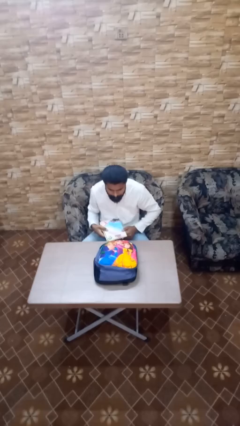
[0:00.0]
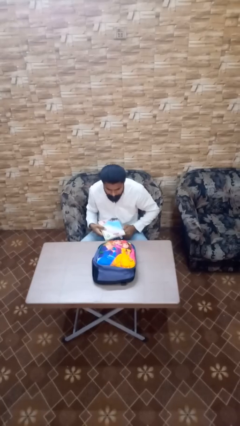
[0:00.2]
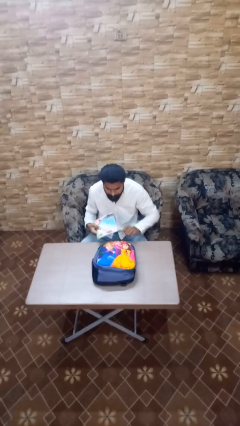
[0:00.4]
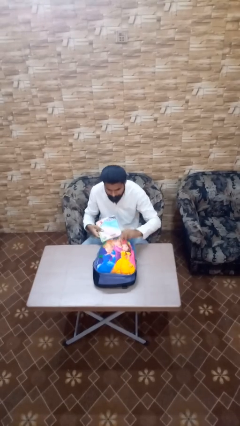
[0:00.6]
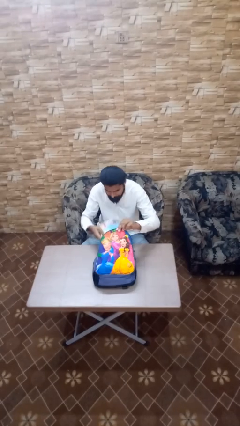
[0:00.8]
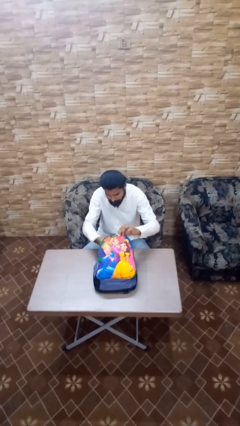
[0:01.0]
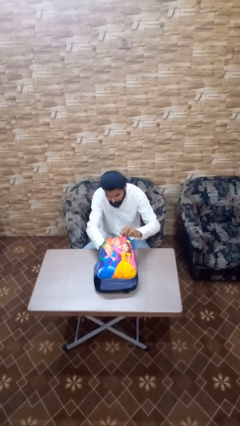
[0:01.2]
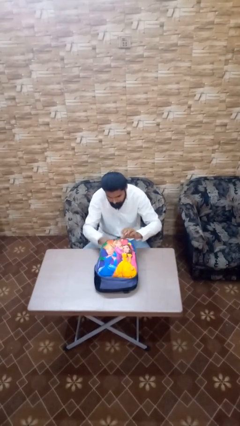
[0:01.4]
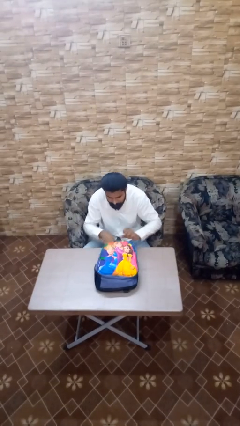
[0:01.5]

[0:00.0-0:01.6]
person puts object into backpack

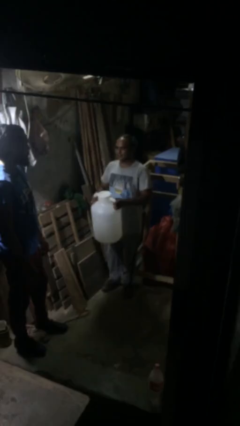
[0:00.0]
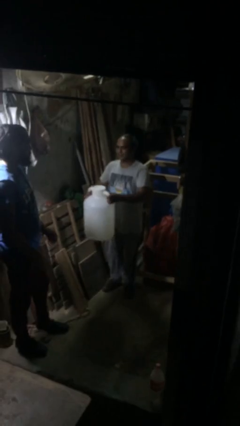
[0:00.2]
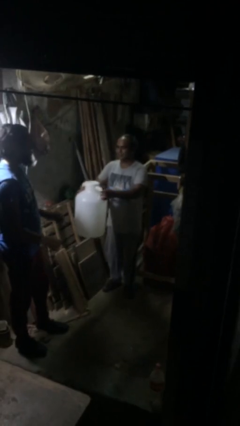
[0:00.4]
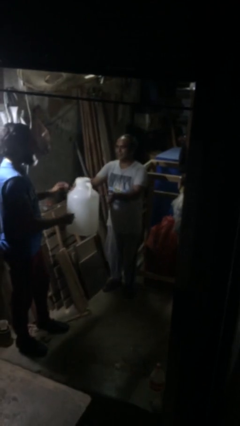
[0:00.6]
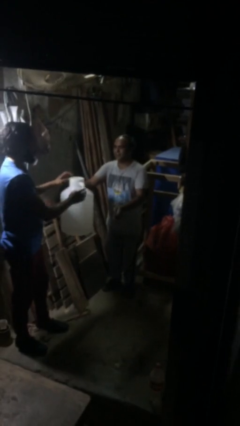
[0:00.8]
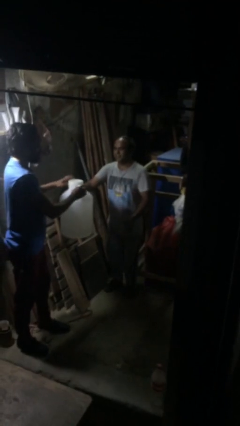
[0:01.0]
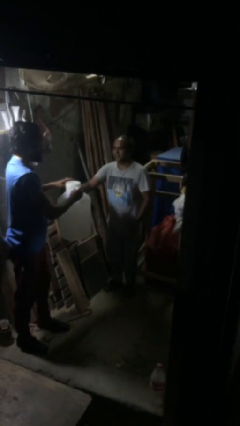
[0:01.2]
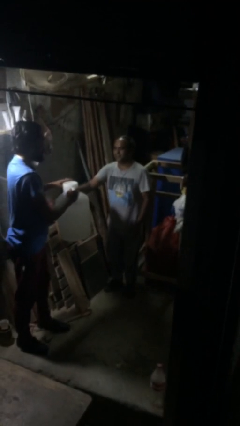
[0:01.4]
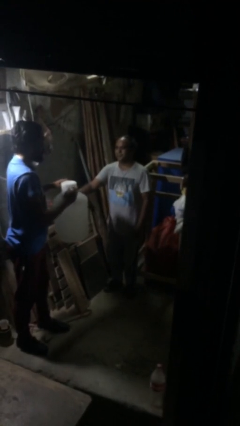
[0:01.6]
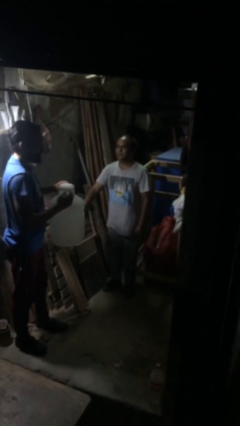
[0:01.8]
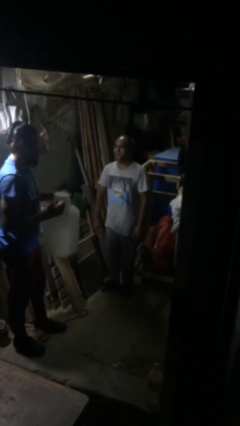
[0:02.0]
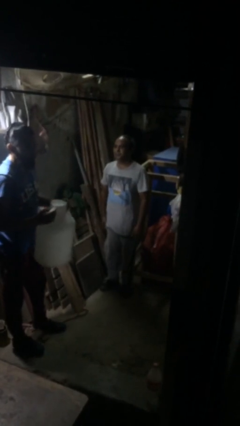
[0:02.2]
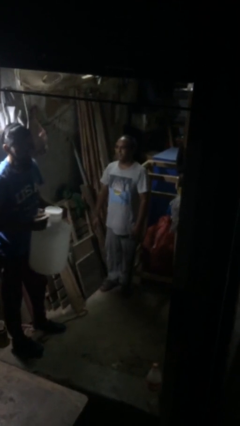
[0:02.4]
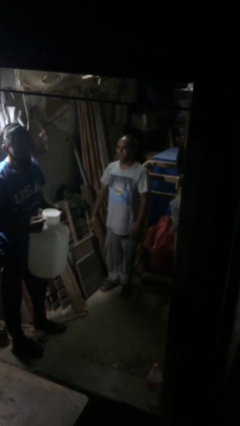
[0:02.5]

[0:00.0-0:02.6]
person transfers object to person

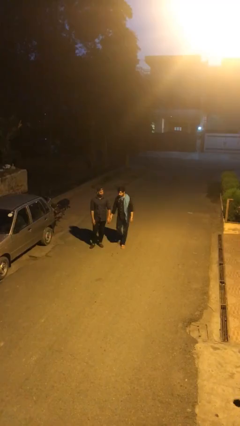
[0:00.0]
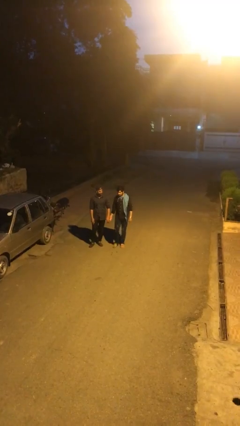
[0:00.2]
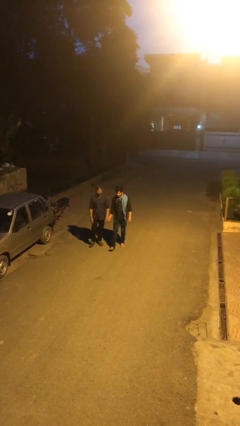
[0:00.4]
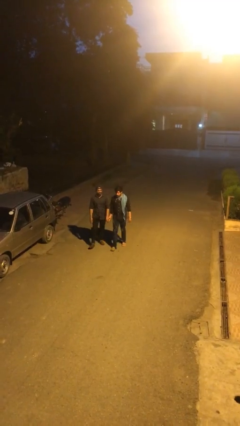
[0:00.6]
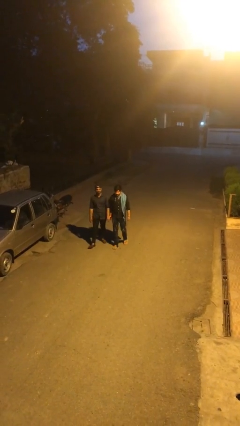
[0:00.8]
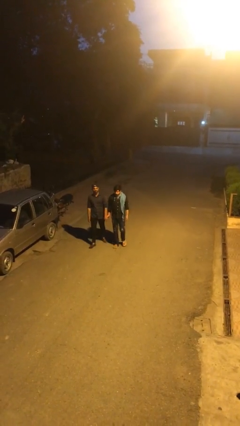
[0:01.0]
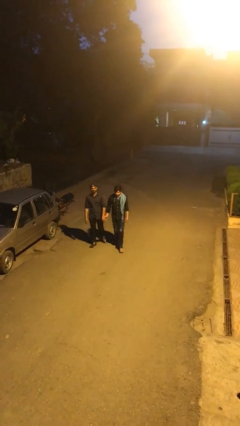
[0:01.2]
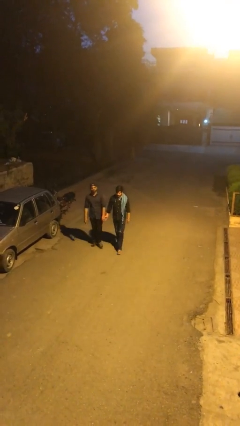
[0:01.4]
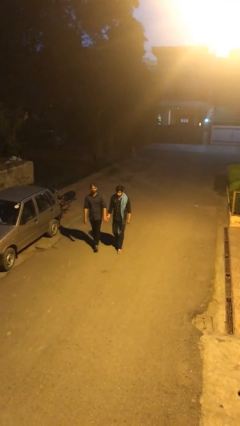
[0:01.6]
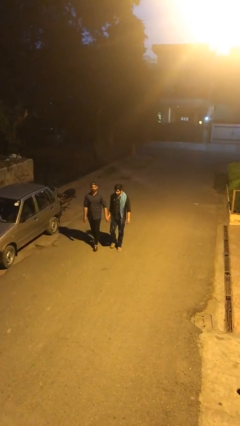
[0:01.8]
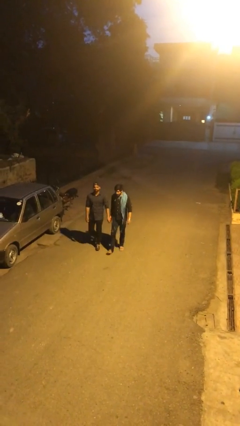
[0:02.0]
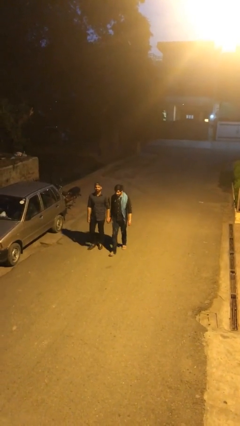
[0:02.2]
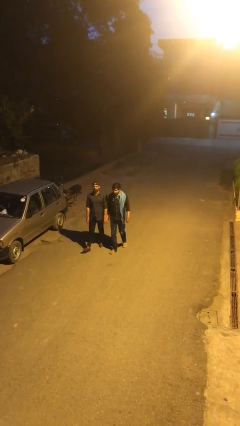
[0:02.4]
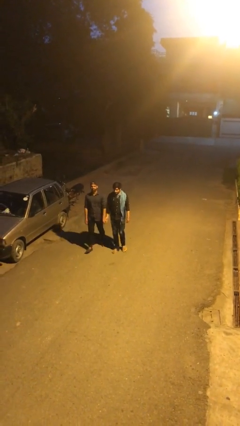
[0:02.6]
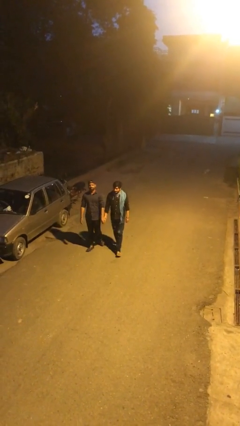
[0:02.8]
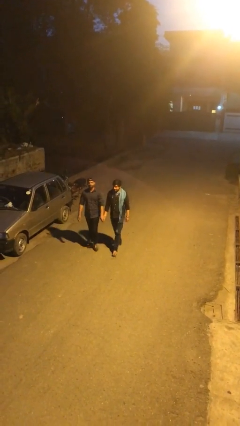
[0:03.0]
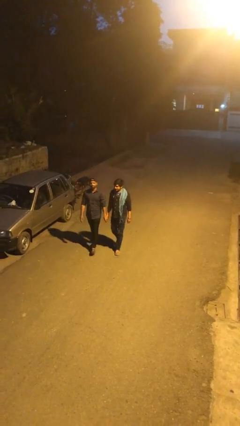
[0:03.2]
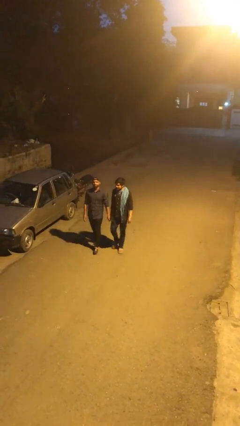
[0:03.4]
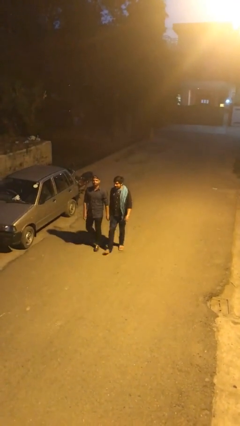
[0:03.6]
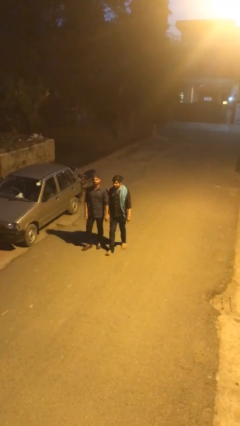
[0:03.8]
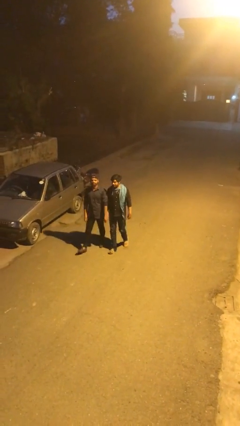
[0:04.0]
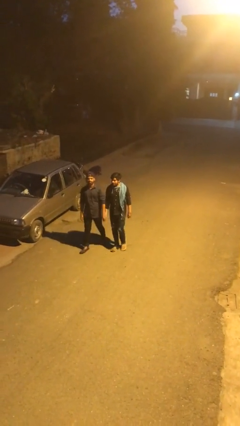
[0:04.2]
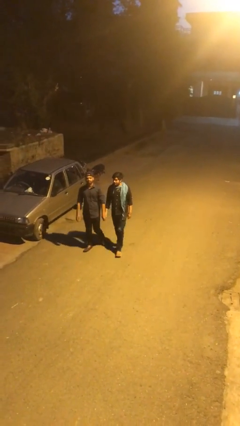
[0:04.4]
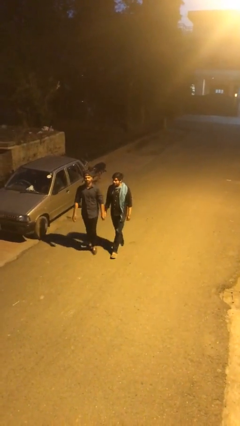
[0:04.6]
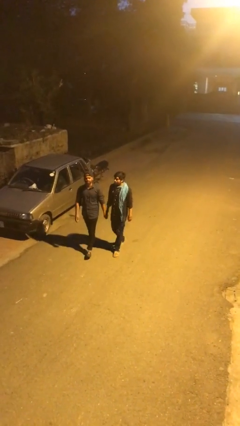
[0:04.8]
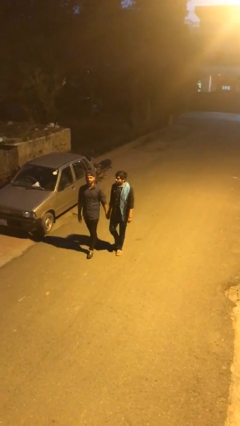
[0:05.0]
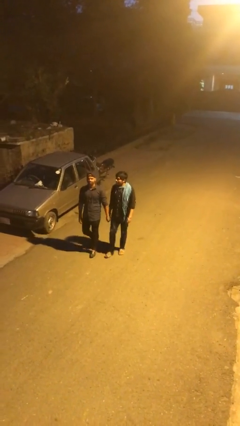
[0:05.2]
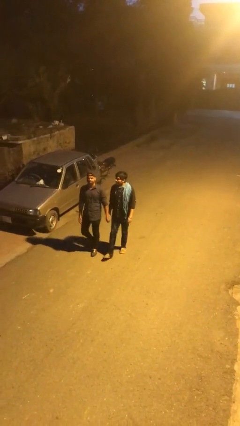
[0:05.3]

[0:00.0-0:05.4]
person holds hand

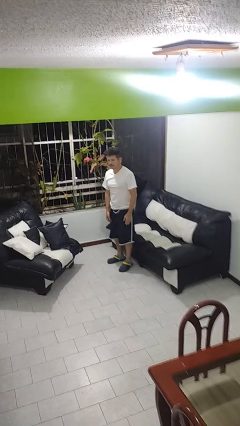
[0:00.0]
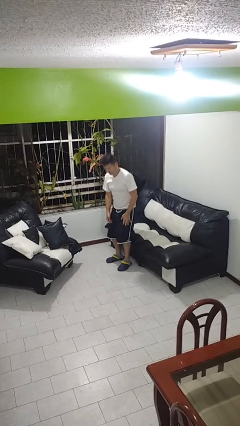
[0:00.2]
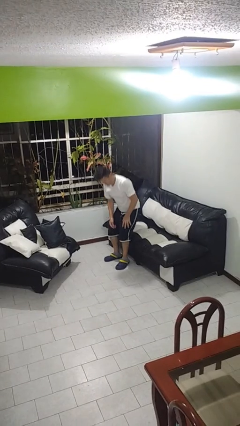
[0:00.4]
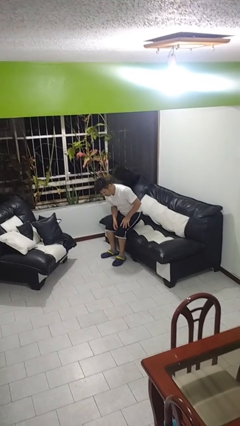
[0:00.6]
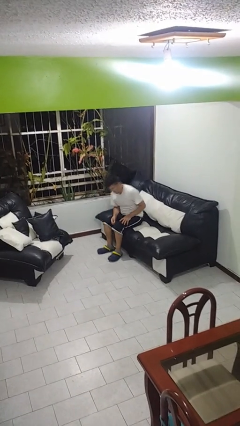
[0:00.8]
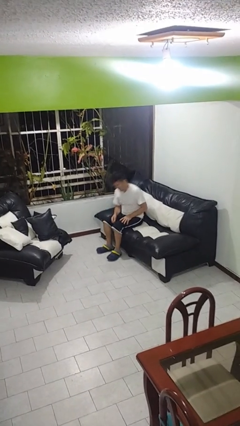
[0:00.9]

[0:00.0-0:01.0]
person lies down on couch

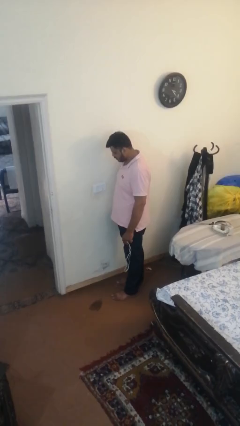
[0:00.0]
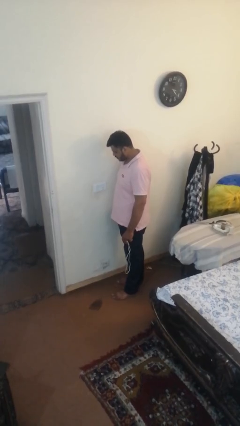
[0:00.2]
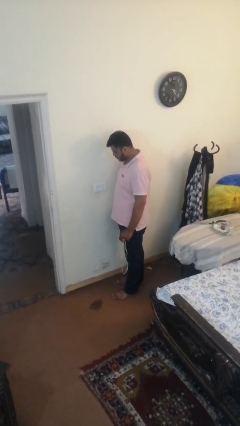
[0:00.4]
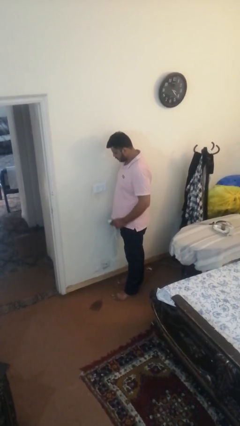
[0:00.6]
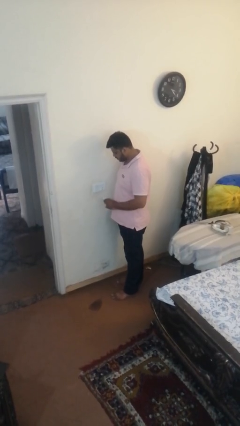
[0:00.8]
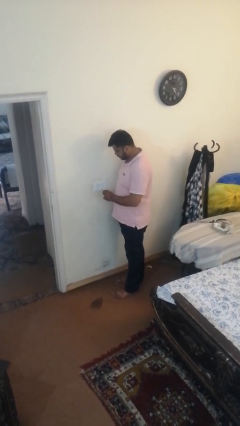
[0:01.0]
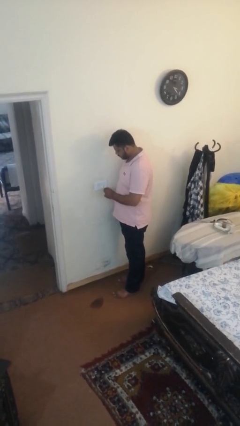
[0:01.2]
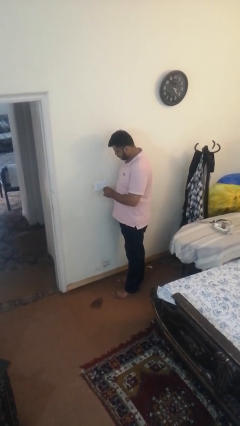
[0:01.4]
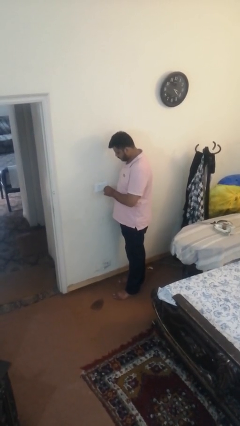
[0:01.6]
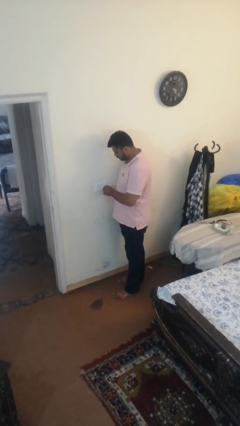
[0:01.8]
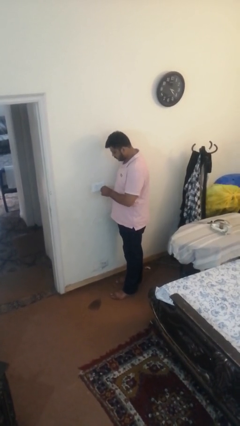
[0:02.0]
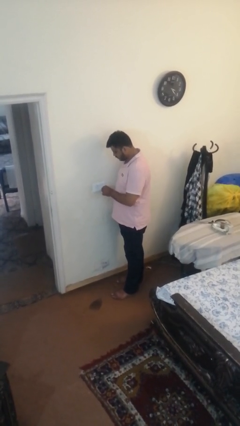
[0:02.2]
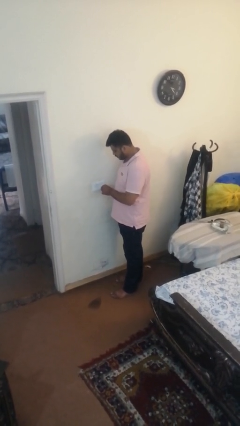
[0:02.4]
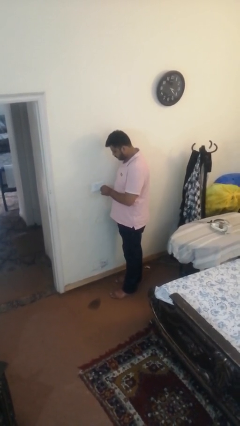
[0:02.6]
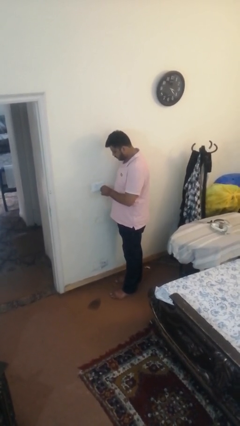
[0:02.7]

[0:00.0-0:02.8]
person plugs into electrical socket

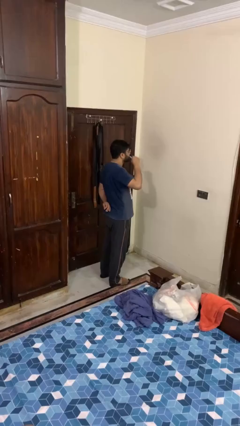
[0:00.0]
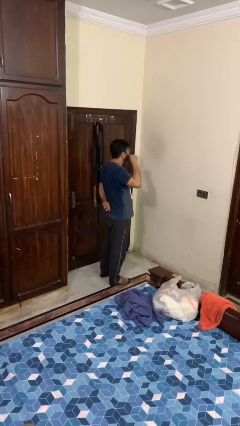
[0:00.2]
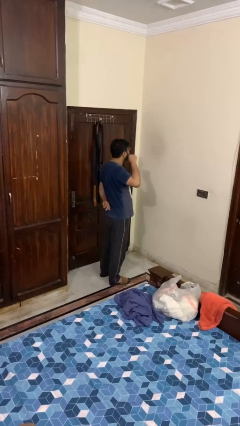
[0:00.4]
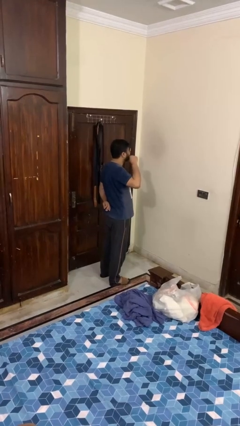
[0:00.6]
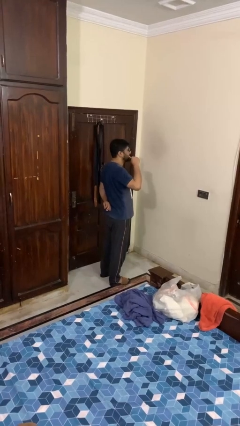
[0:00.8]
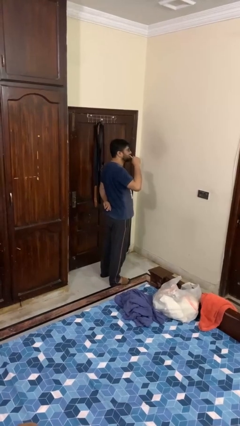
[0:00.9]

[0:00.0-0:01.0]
person brushes teeth

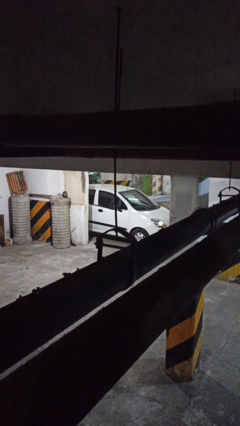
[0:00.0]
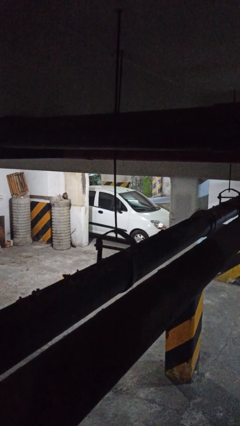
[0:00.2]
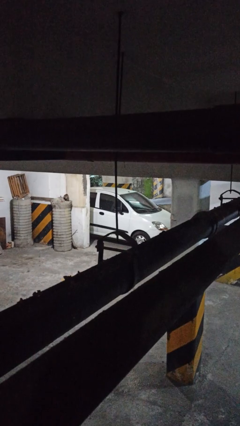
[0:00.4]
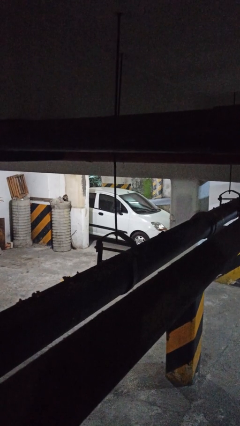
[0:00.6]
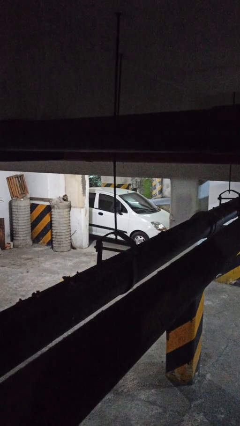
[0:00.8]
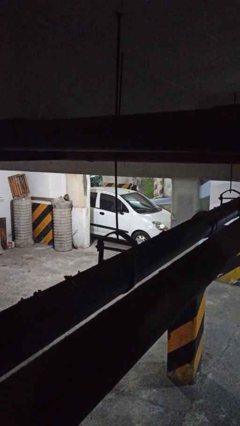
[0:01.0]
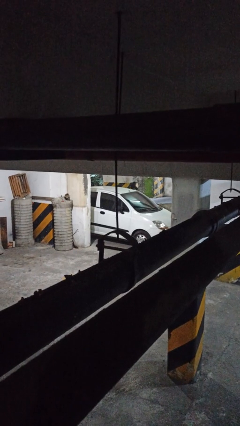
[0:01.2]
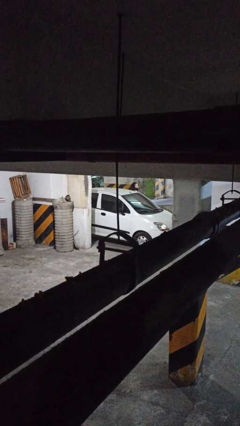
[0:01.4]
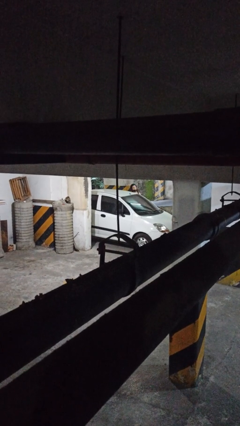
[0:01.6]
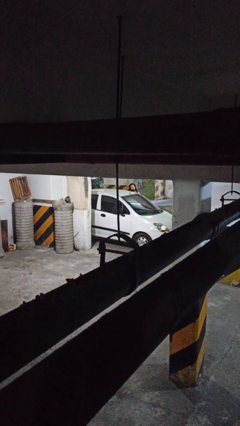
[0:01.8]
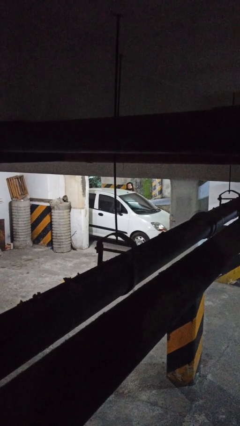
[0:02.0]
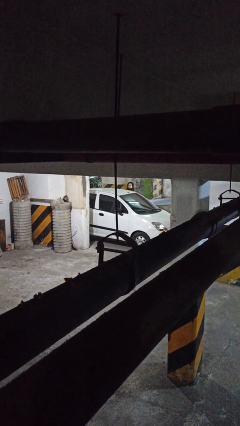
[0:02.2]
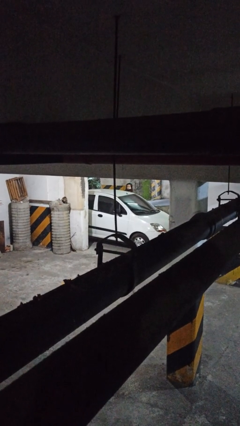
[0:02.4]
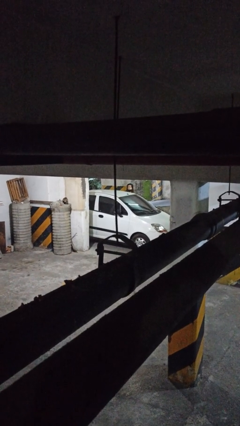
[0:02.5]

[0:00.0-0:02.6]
car drops off person
